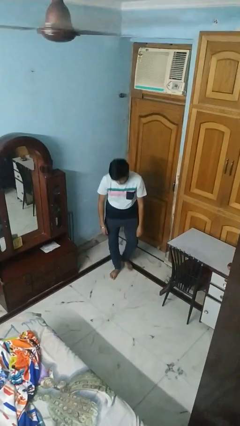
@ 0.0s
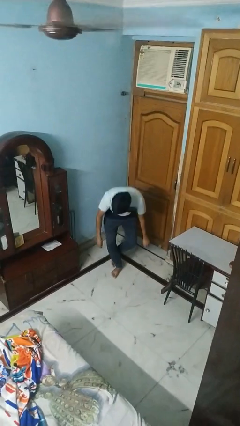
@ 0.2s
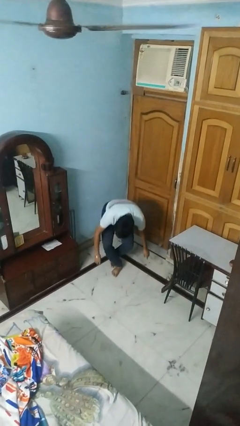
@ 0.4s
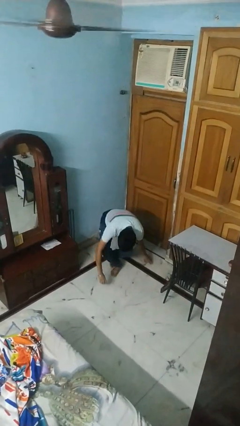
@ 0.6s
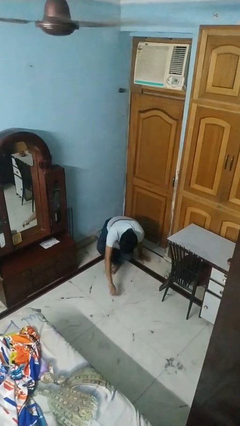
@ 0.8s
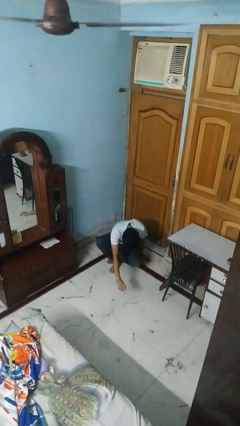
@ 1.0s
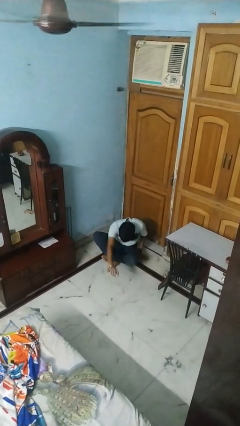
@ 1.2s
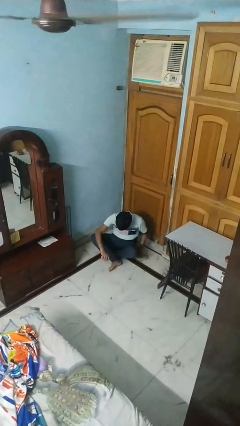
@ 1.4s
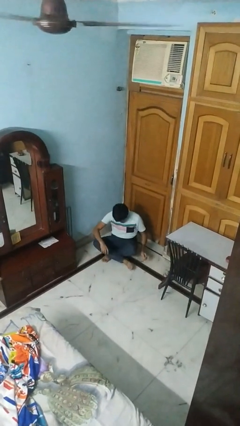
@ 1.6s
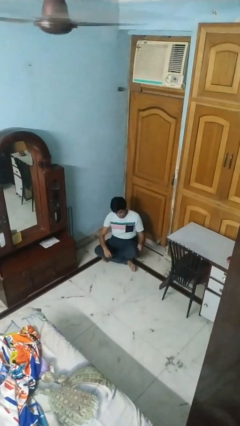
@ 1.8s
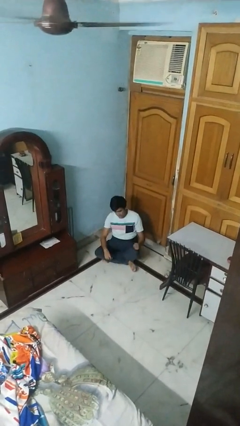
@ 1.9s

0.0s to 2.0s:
person sits crisscross

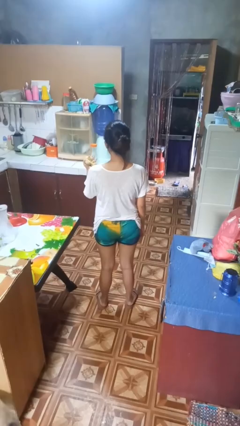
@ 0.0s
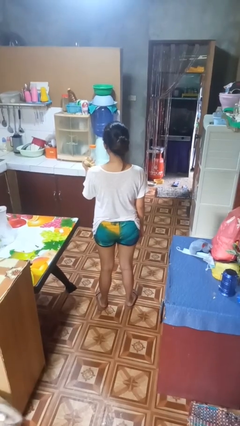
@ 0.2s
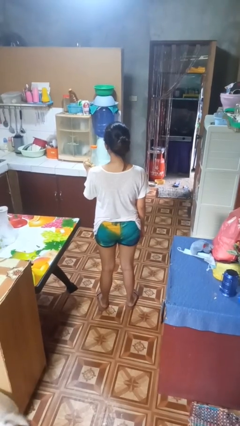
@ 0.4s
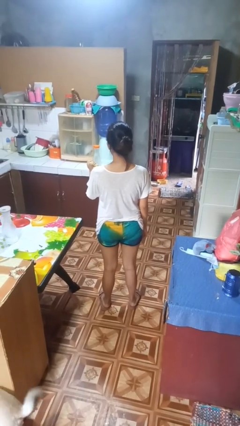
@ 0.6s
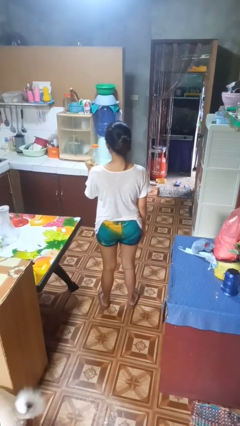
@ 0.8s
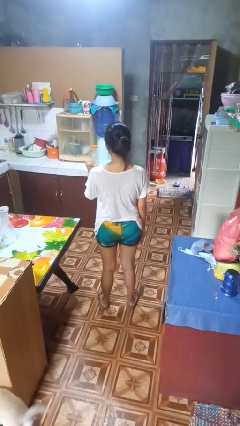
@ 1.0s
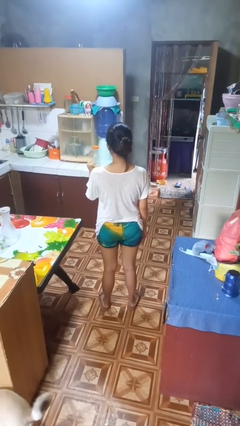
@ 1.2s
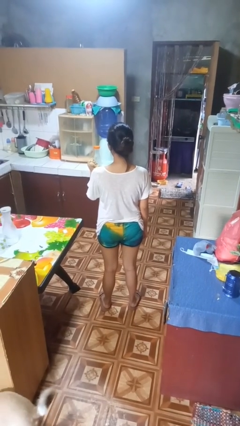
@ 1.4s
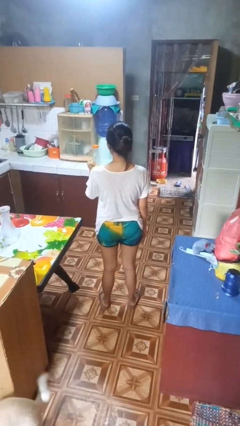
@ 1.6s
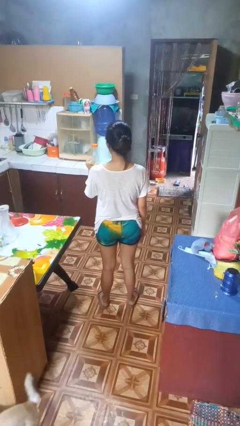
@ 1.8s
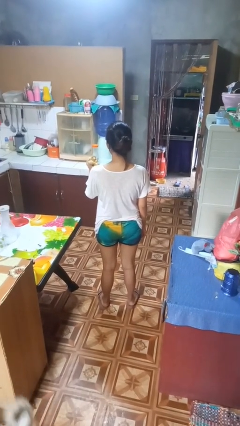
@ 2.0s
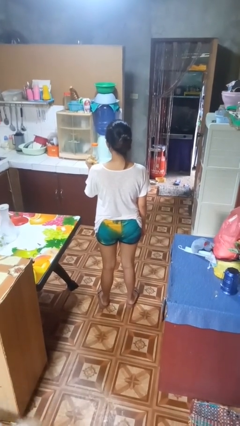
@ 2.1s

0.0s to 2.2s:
person squeezes object

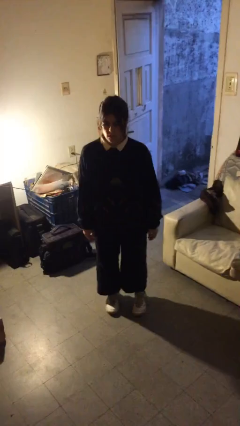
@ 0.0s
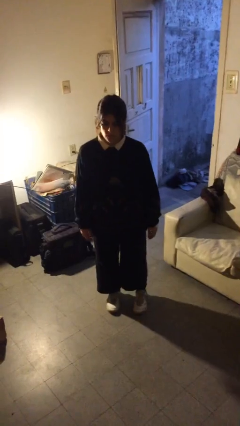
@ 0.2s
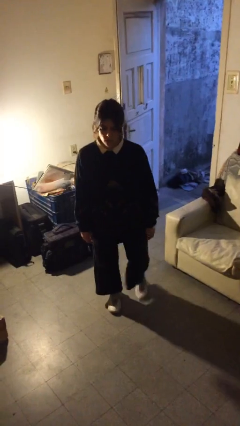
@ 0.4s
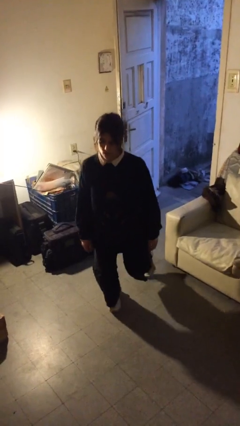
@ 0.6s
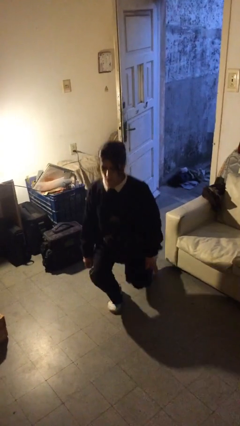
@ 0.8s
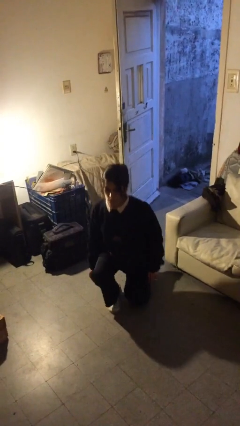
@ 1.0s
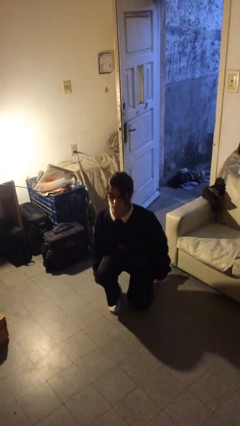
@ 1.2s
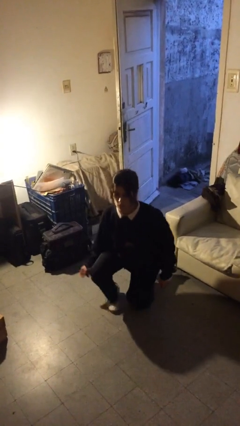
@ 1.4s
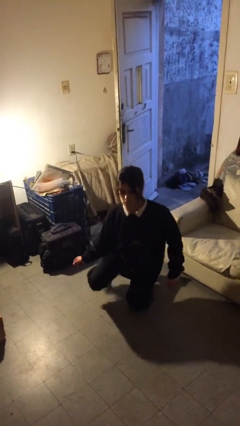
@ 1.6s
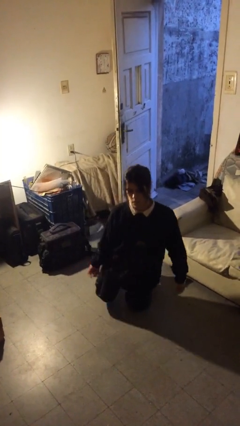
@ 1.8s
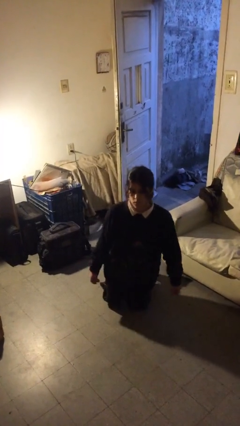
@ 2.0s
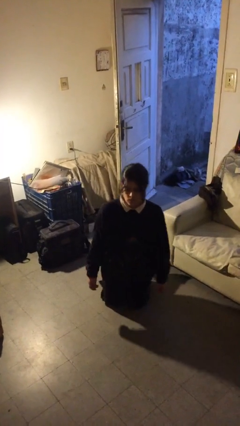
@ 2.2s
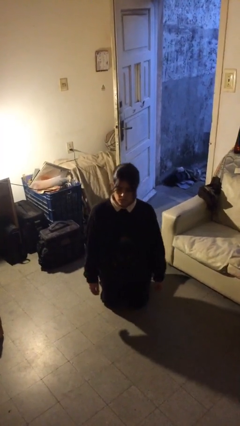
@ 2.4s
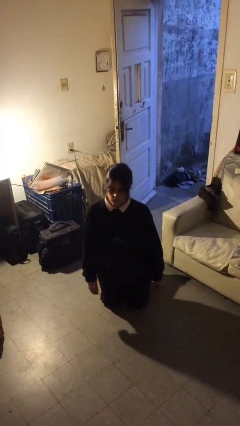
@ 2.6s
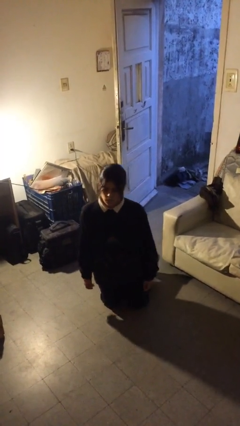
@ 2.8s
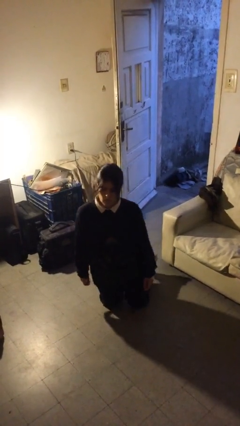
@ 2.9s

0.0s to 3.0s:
person kneels

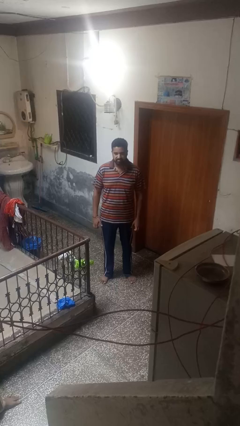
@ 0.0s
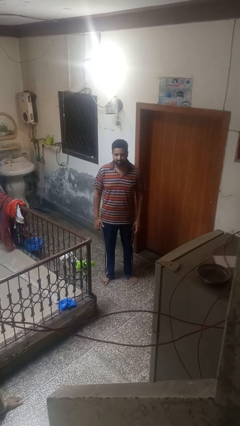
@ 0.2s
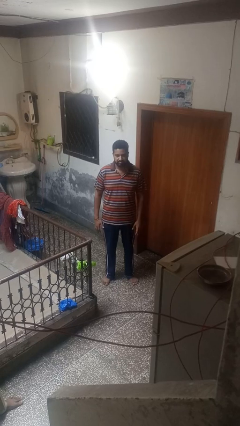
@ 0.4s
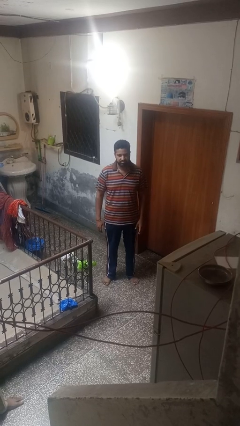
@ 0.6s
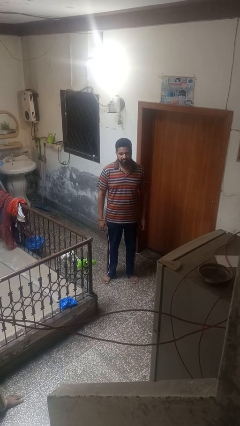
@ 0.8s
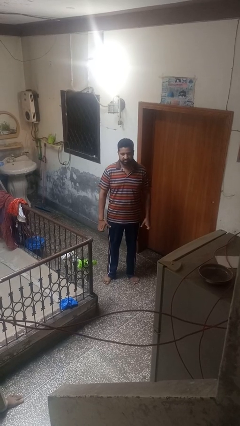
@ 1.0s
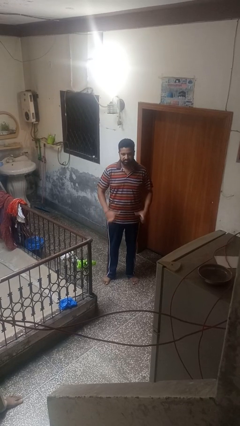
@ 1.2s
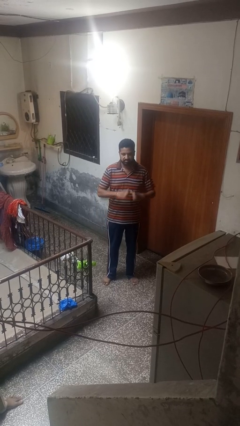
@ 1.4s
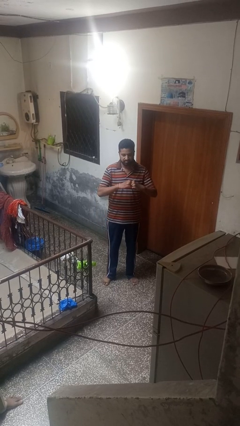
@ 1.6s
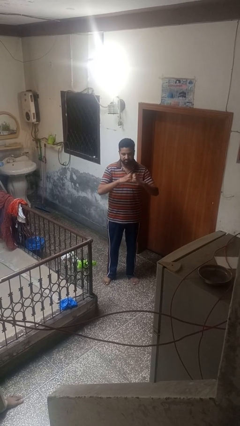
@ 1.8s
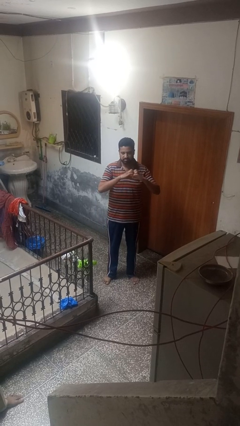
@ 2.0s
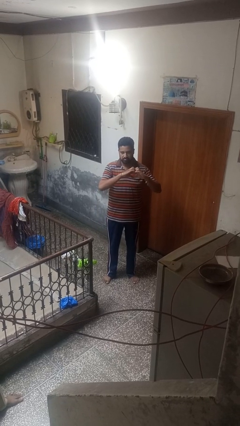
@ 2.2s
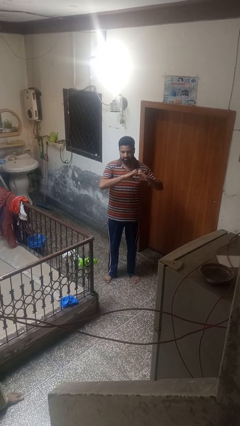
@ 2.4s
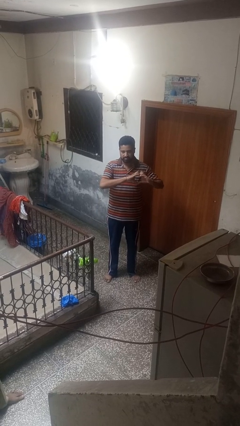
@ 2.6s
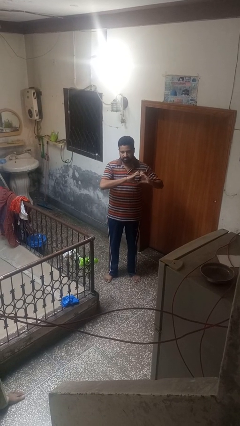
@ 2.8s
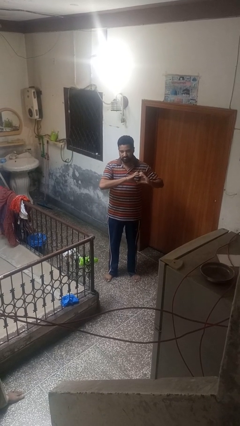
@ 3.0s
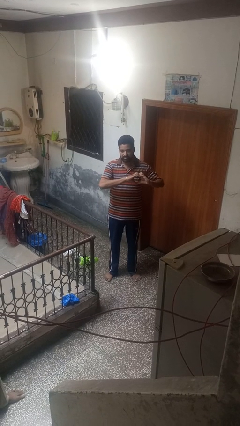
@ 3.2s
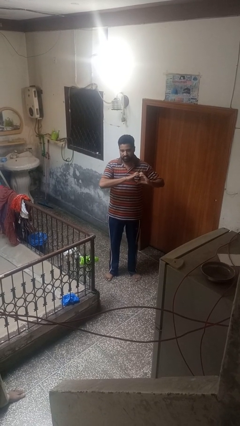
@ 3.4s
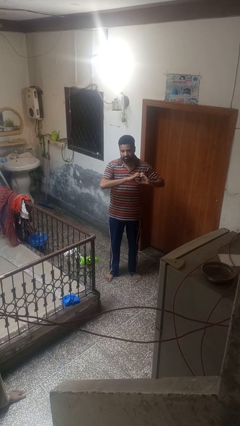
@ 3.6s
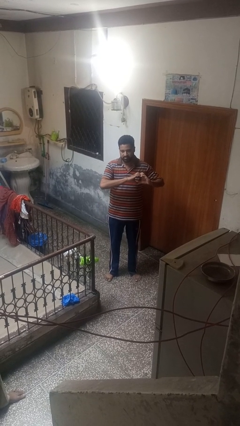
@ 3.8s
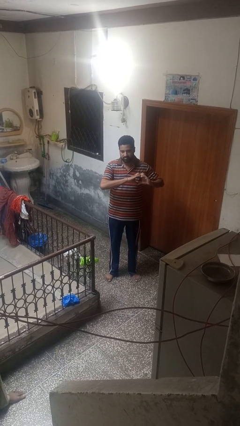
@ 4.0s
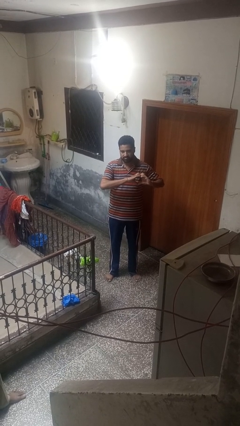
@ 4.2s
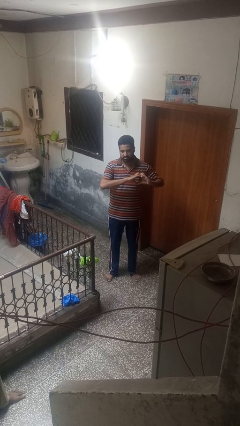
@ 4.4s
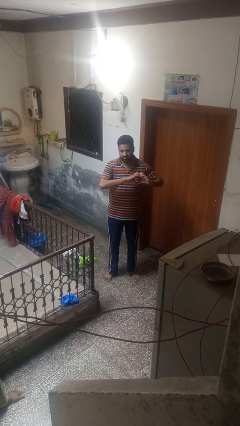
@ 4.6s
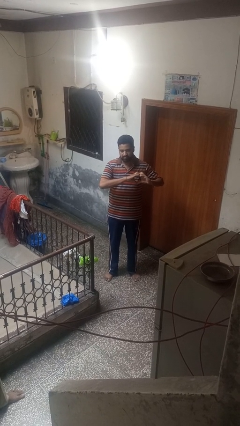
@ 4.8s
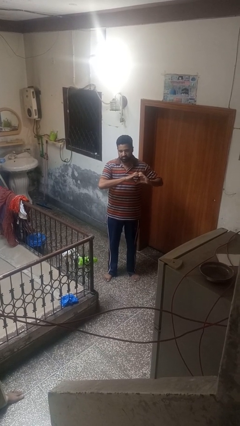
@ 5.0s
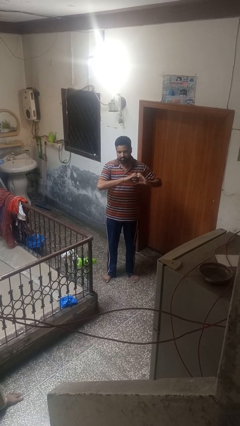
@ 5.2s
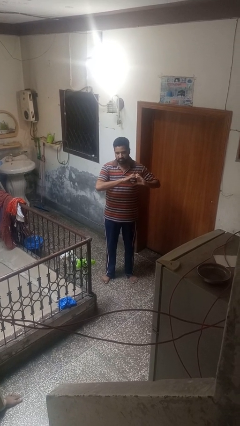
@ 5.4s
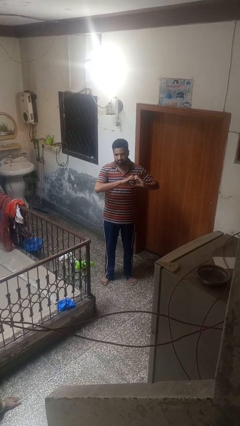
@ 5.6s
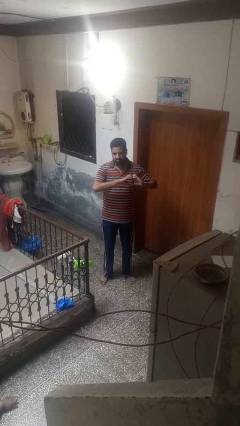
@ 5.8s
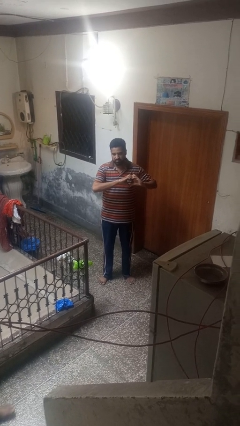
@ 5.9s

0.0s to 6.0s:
person gestures heart

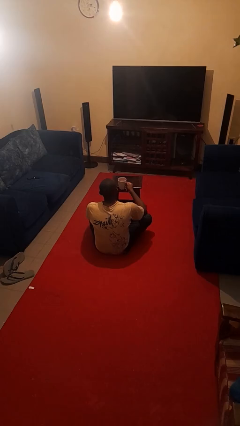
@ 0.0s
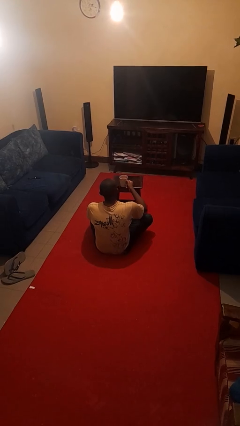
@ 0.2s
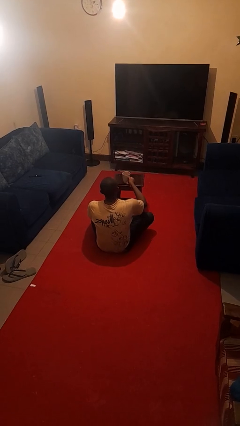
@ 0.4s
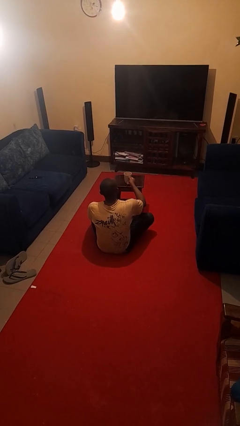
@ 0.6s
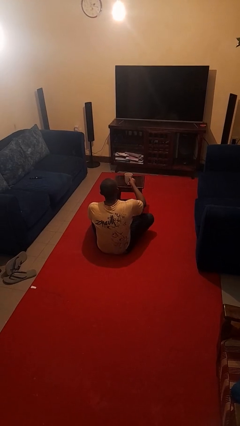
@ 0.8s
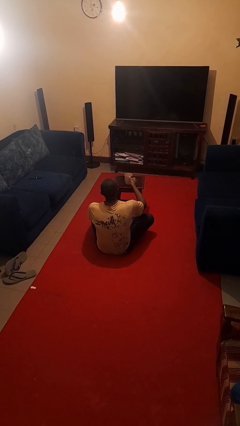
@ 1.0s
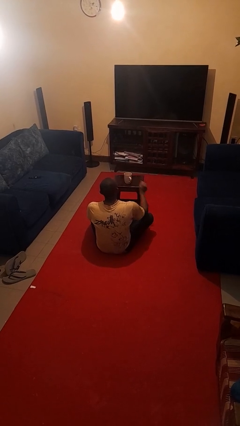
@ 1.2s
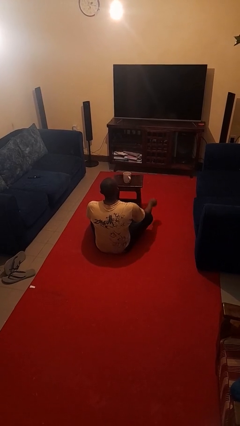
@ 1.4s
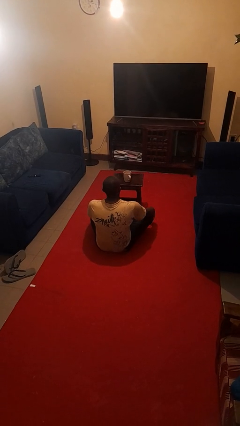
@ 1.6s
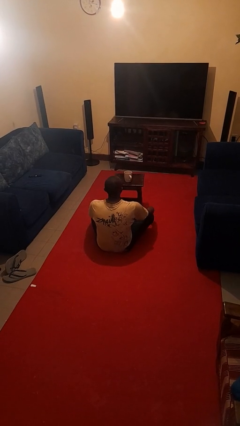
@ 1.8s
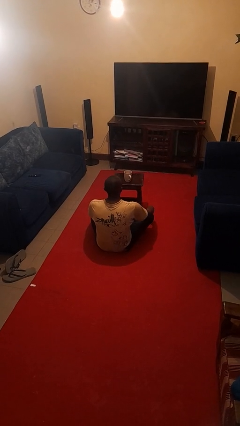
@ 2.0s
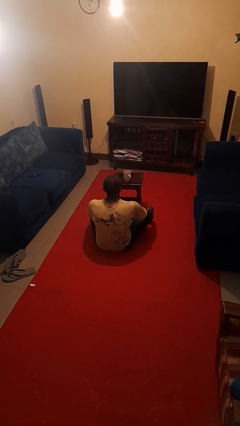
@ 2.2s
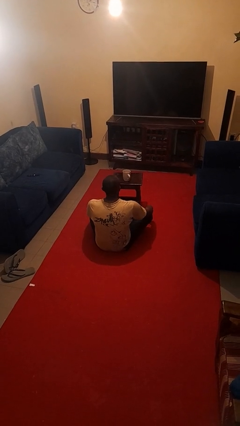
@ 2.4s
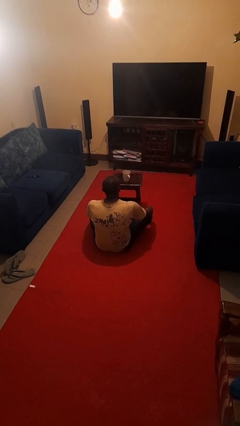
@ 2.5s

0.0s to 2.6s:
person puts down object on table

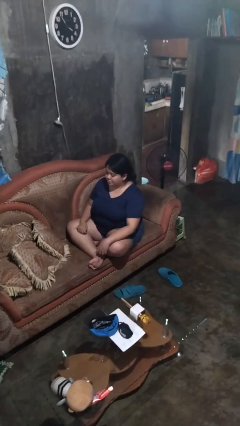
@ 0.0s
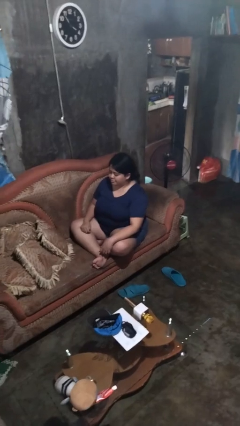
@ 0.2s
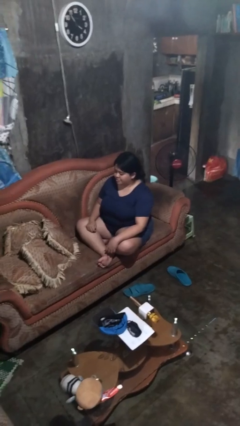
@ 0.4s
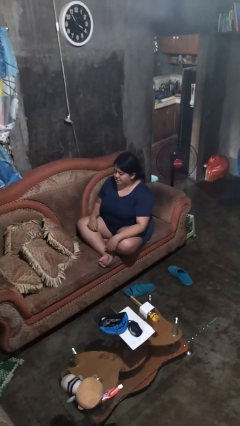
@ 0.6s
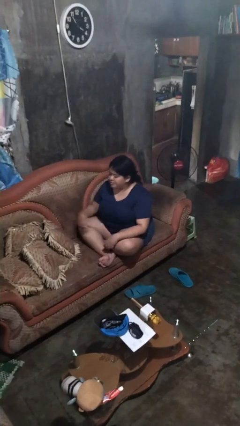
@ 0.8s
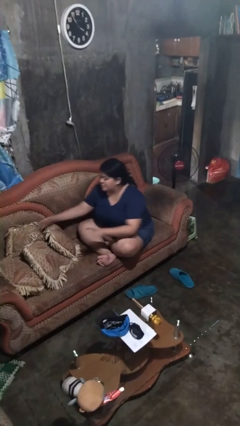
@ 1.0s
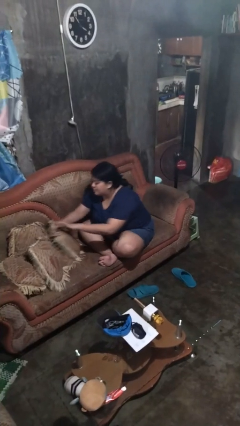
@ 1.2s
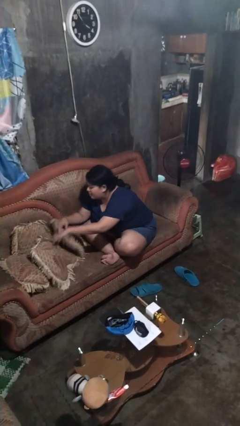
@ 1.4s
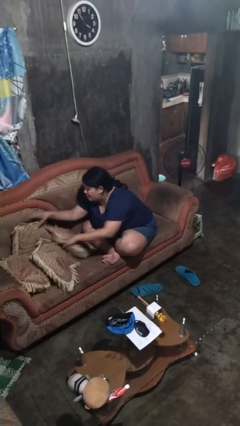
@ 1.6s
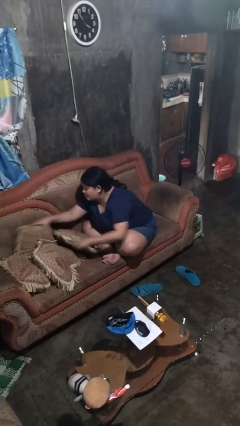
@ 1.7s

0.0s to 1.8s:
person searches in couch
